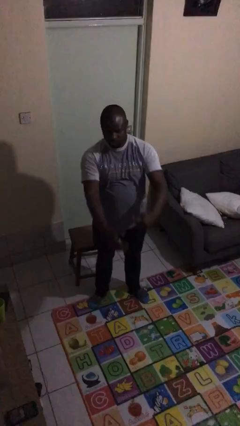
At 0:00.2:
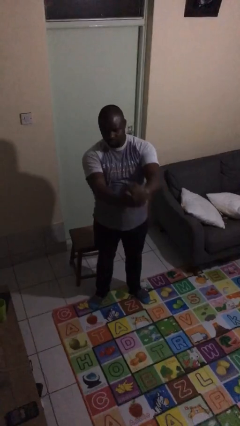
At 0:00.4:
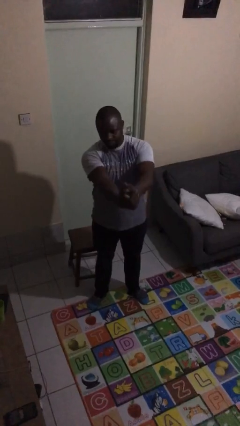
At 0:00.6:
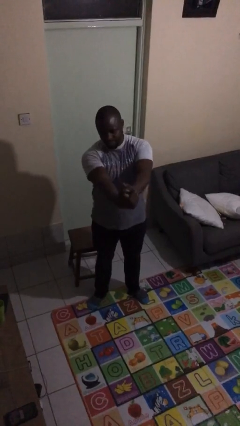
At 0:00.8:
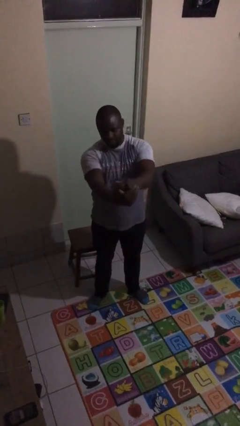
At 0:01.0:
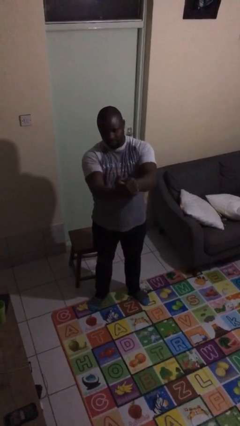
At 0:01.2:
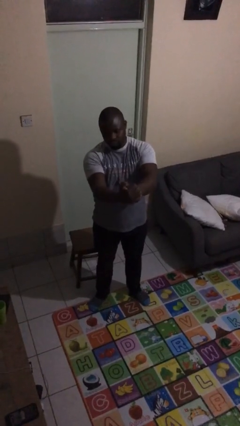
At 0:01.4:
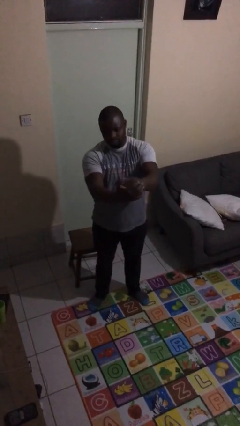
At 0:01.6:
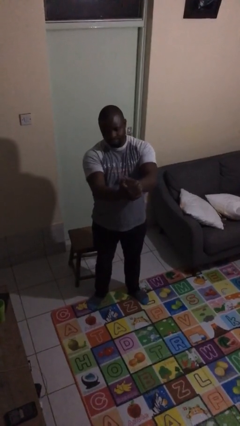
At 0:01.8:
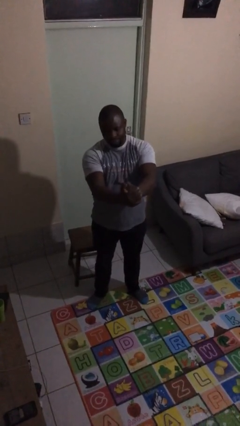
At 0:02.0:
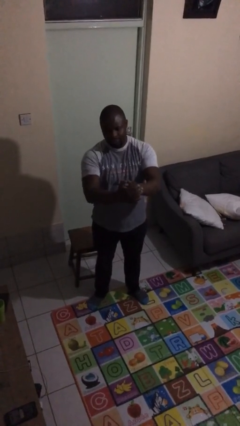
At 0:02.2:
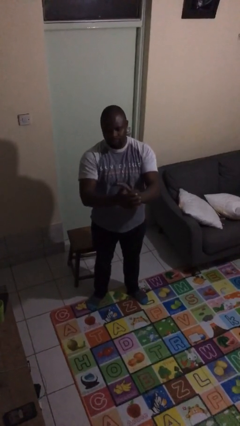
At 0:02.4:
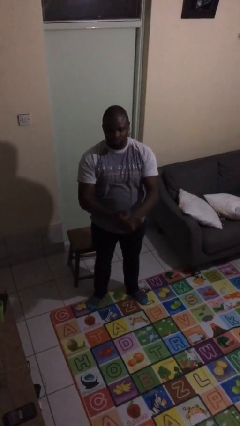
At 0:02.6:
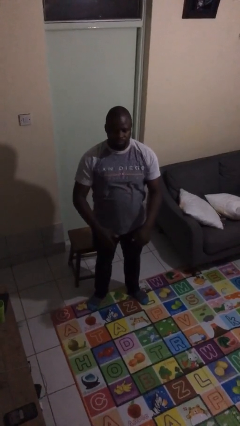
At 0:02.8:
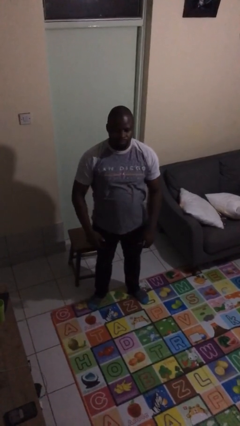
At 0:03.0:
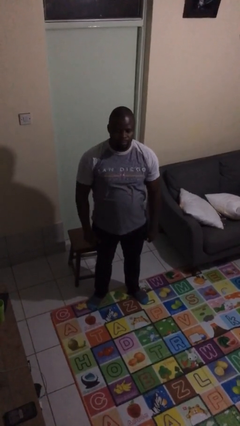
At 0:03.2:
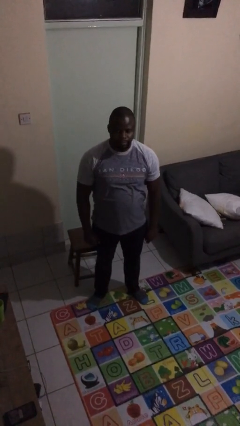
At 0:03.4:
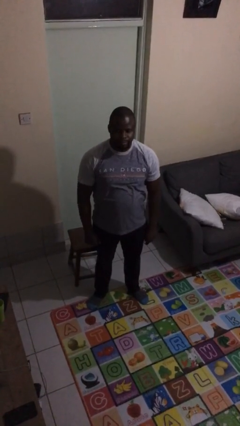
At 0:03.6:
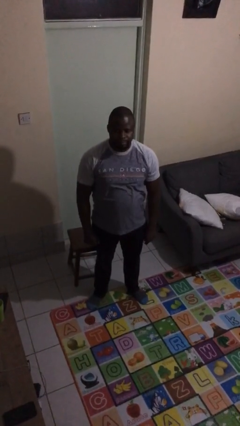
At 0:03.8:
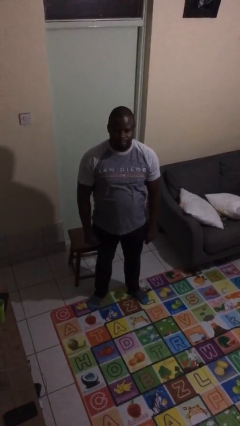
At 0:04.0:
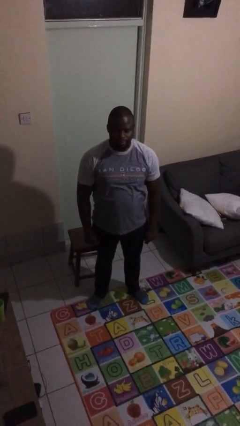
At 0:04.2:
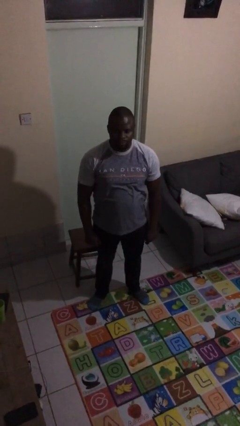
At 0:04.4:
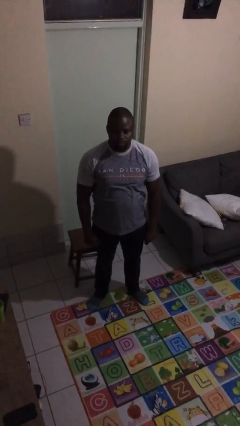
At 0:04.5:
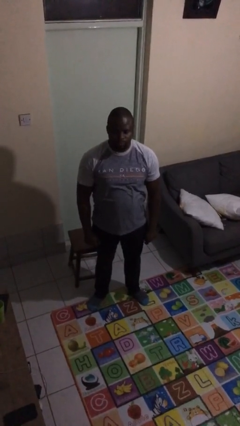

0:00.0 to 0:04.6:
person cracks knuckles

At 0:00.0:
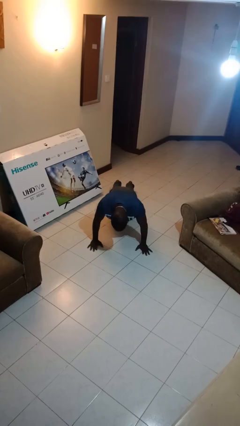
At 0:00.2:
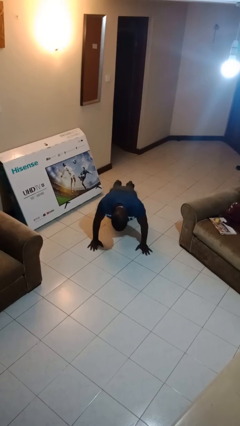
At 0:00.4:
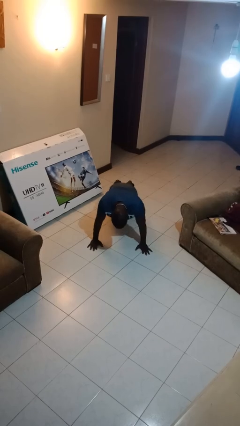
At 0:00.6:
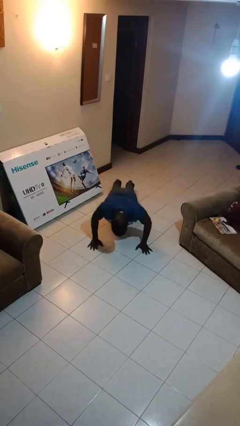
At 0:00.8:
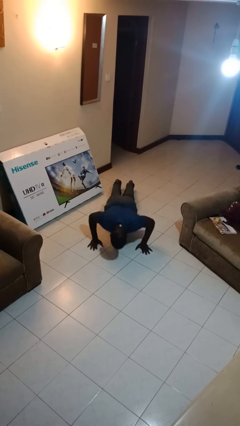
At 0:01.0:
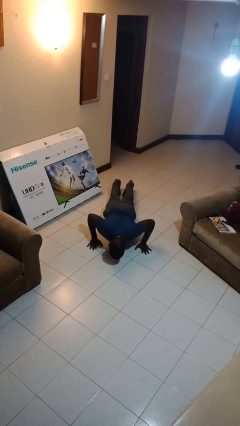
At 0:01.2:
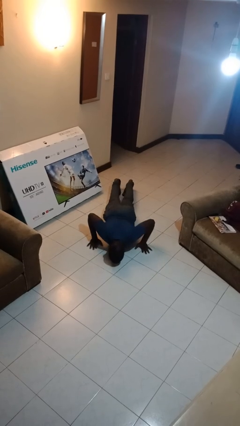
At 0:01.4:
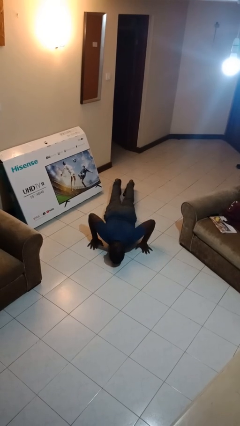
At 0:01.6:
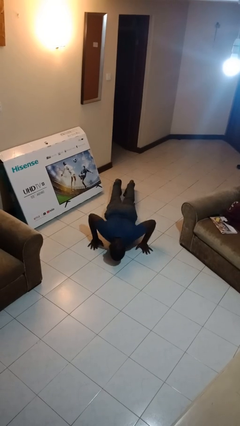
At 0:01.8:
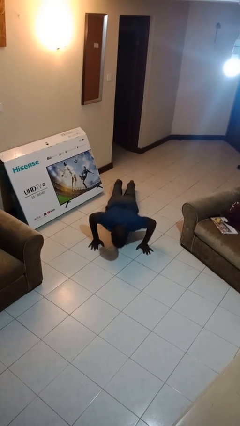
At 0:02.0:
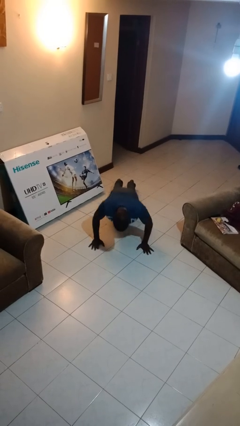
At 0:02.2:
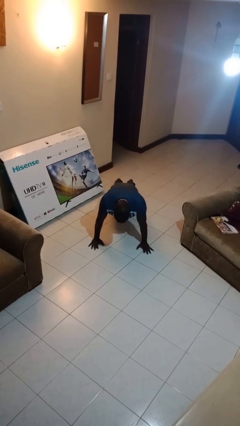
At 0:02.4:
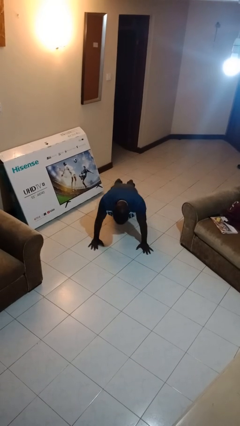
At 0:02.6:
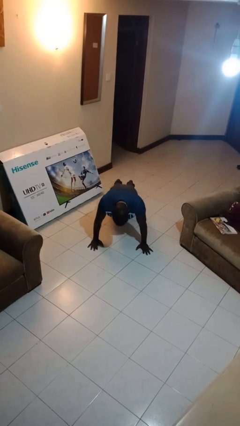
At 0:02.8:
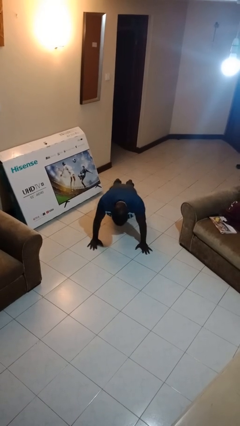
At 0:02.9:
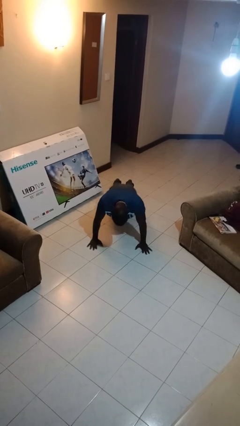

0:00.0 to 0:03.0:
person exercises with pushup

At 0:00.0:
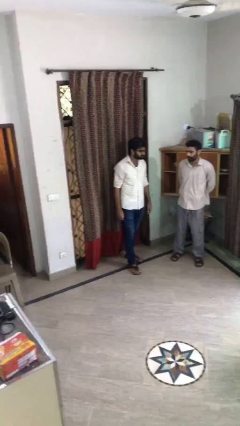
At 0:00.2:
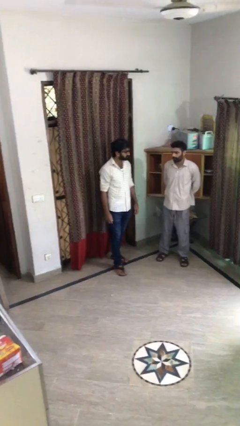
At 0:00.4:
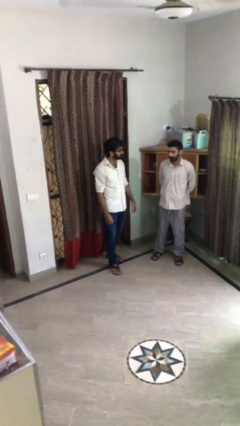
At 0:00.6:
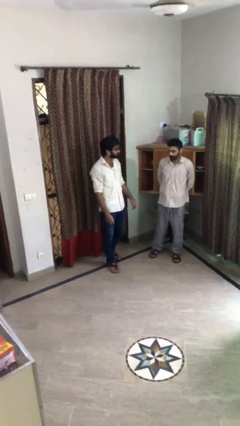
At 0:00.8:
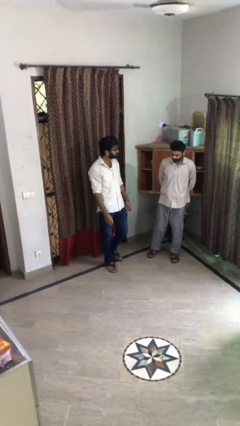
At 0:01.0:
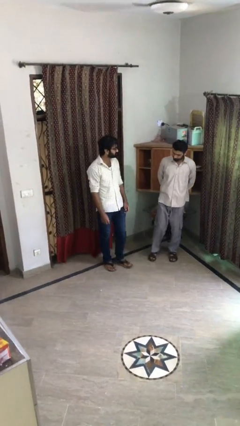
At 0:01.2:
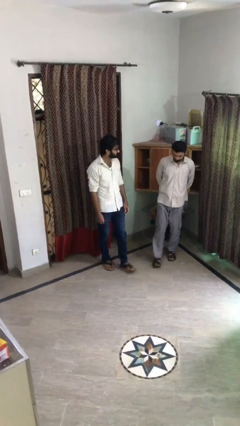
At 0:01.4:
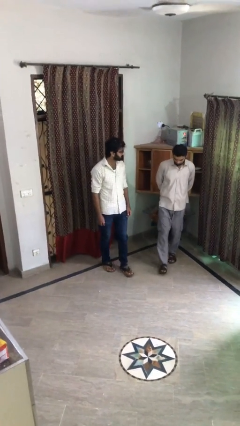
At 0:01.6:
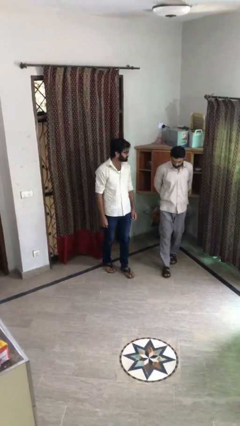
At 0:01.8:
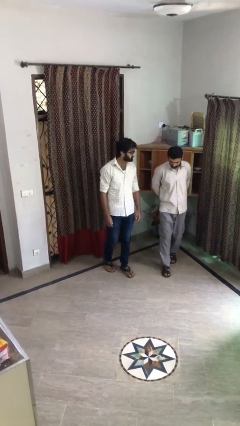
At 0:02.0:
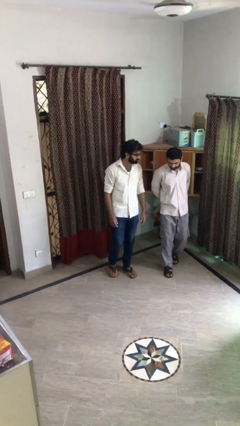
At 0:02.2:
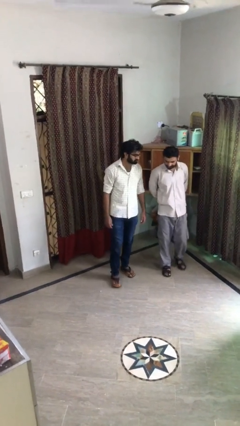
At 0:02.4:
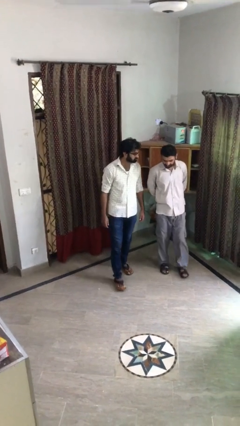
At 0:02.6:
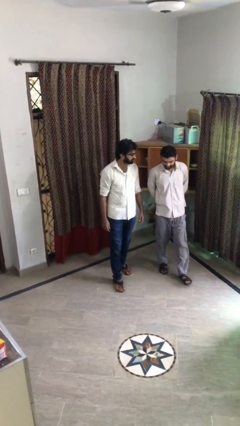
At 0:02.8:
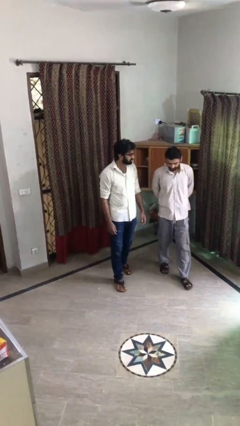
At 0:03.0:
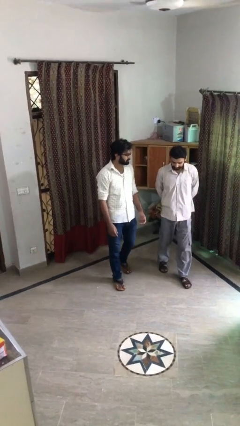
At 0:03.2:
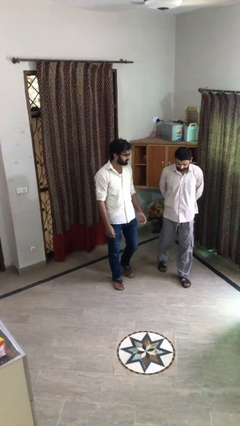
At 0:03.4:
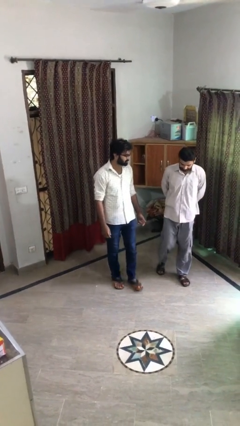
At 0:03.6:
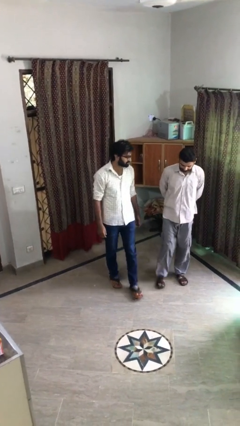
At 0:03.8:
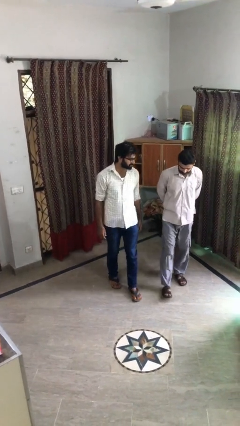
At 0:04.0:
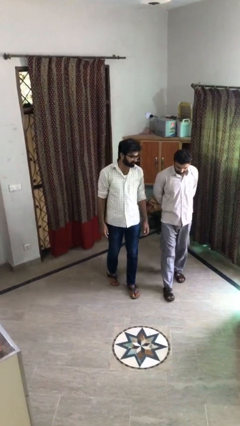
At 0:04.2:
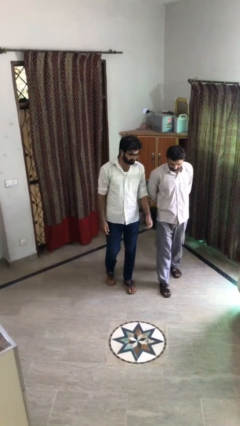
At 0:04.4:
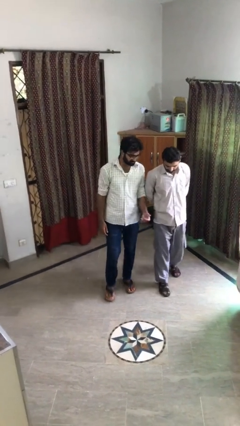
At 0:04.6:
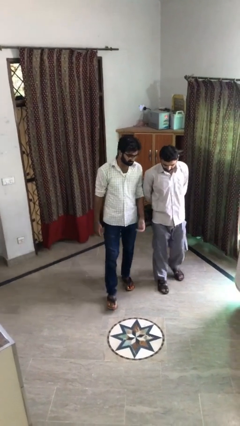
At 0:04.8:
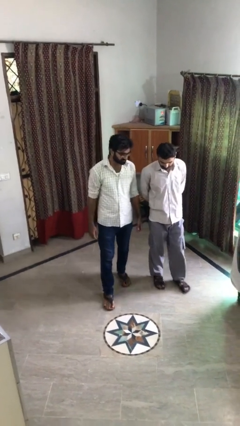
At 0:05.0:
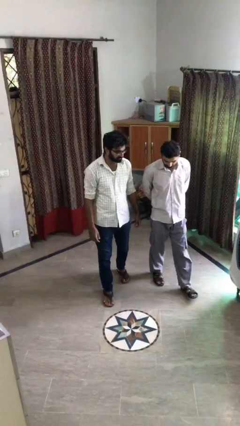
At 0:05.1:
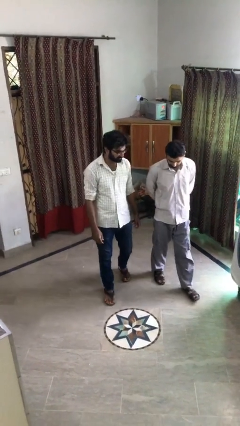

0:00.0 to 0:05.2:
person talks to person

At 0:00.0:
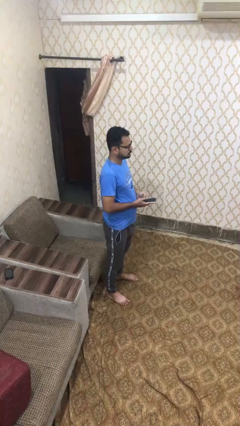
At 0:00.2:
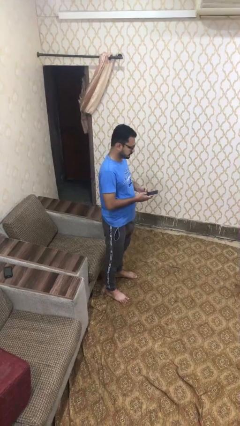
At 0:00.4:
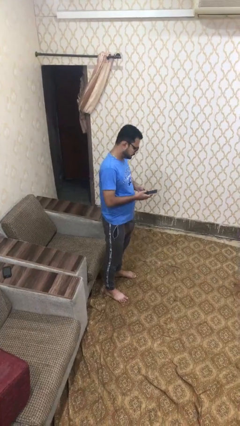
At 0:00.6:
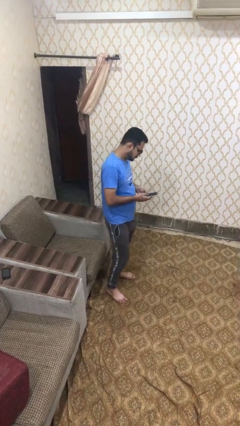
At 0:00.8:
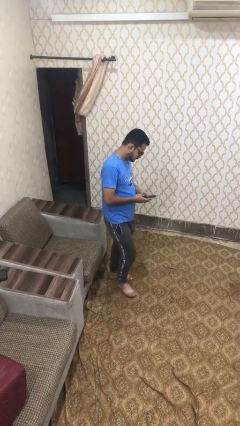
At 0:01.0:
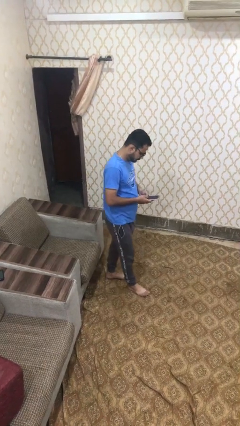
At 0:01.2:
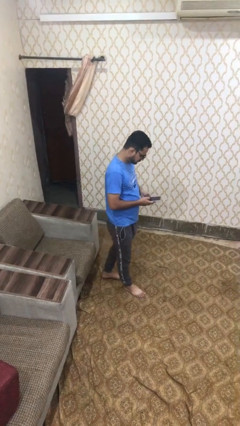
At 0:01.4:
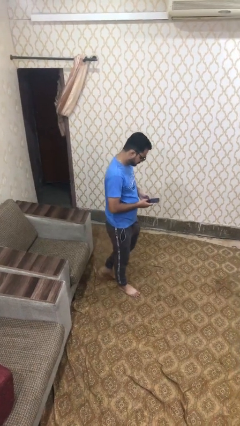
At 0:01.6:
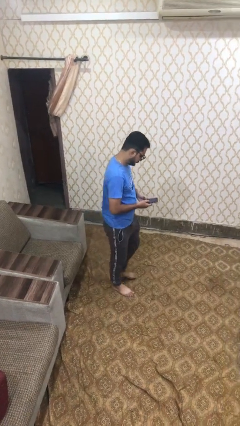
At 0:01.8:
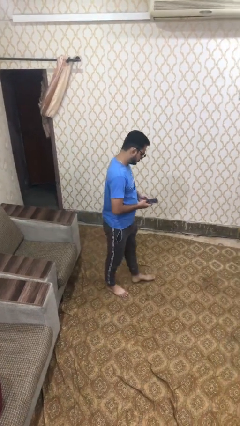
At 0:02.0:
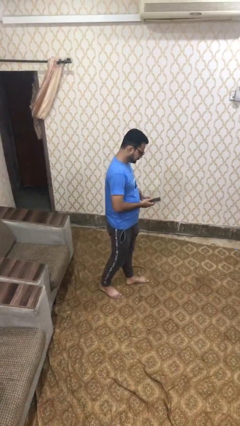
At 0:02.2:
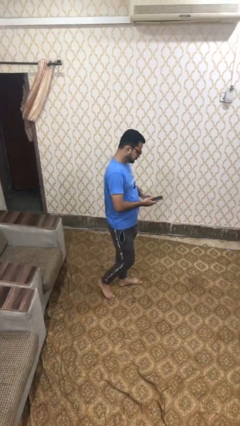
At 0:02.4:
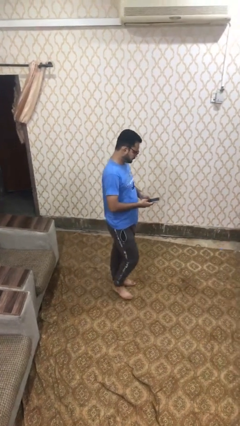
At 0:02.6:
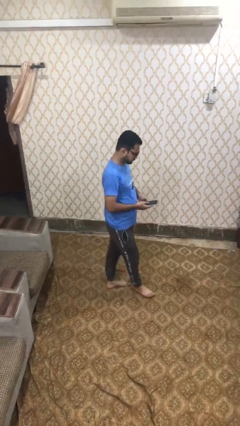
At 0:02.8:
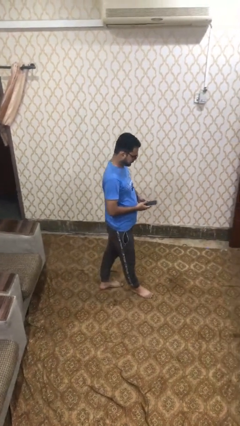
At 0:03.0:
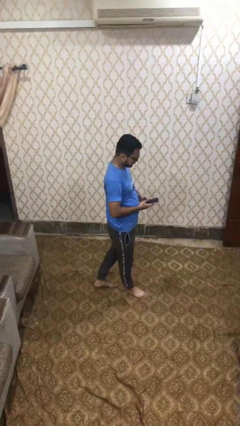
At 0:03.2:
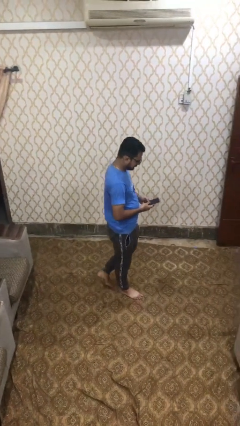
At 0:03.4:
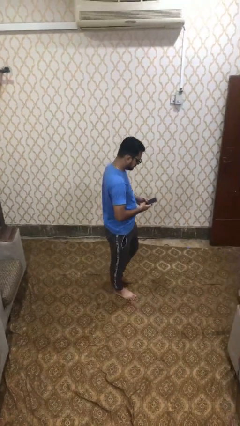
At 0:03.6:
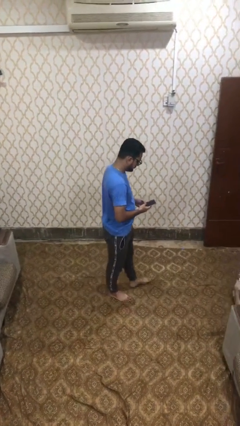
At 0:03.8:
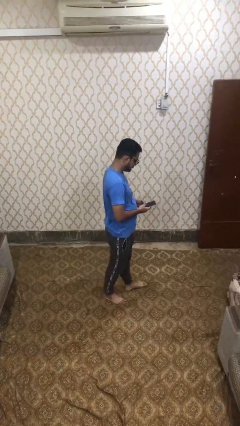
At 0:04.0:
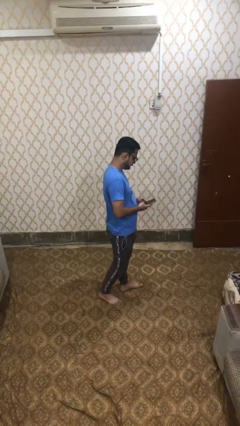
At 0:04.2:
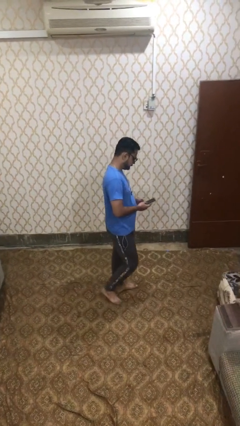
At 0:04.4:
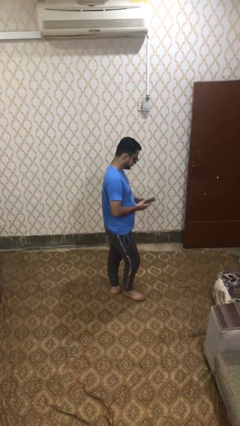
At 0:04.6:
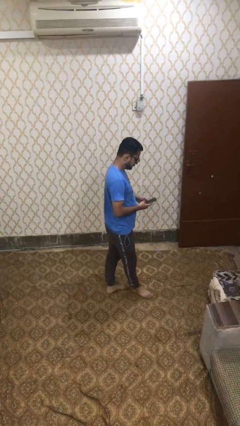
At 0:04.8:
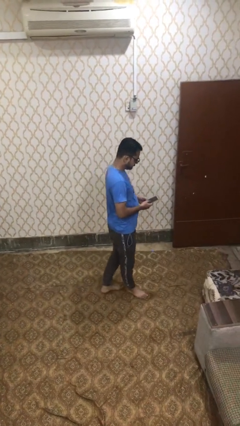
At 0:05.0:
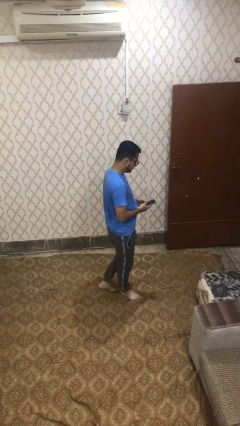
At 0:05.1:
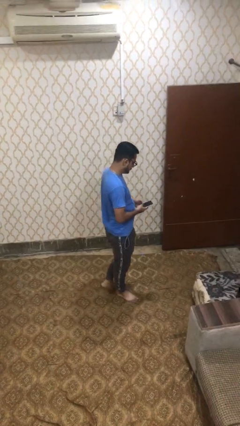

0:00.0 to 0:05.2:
person texts on phone
